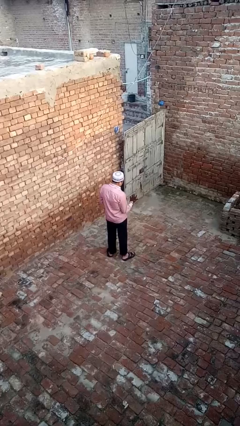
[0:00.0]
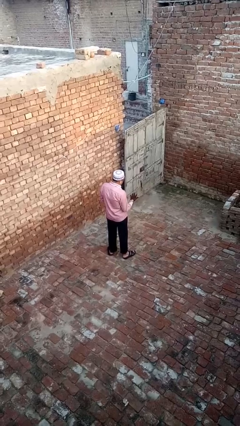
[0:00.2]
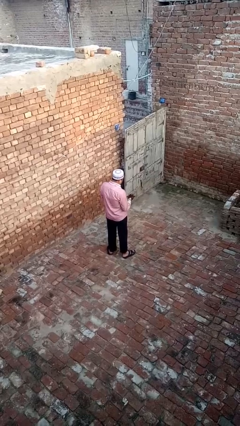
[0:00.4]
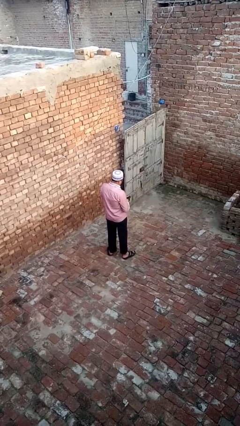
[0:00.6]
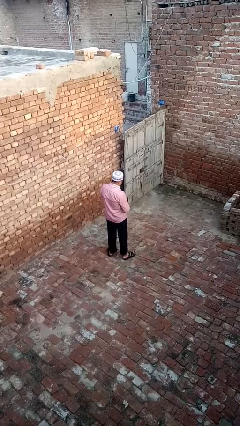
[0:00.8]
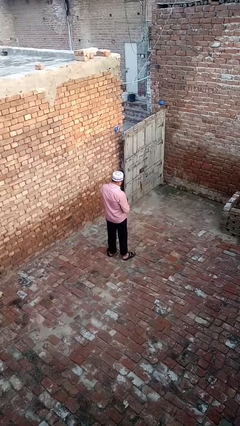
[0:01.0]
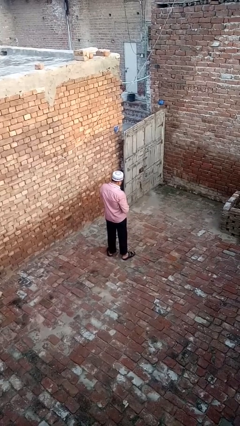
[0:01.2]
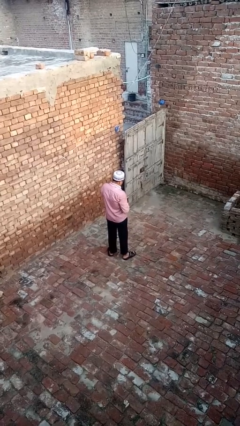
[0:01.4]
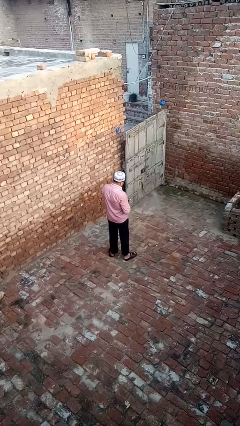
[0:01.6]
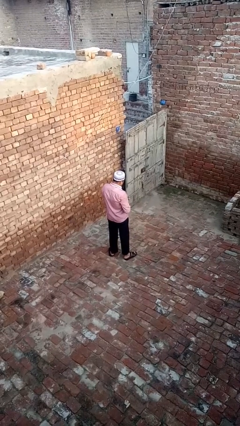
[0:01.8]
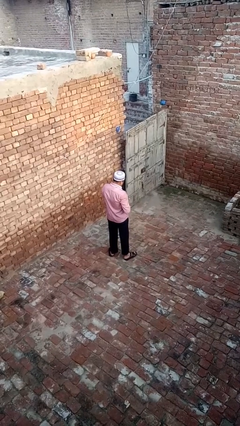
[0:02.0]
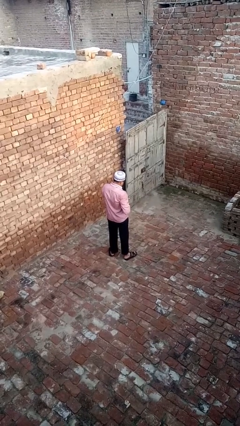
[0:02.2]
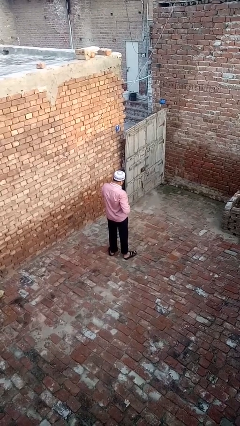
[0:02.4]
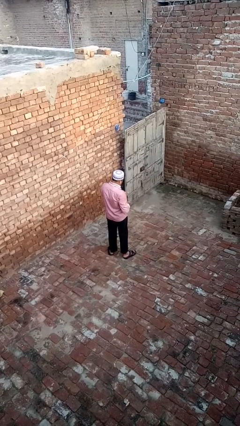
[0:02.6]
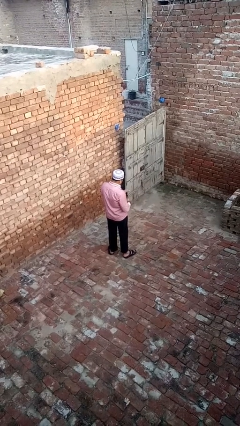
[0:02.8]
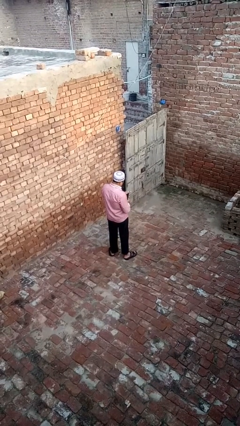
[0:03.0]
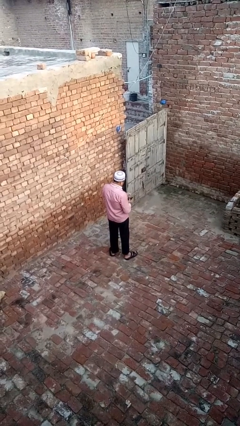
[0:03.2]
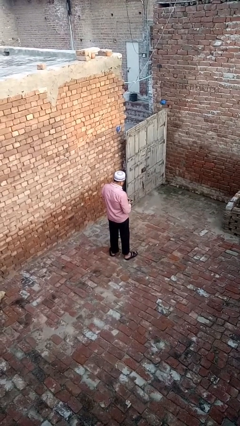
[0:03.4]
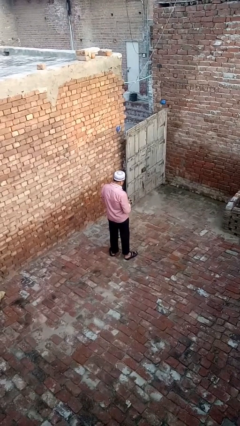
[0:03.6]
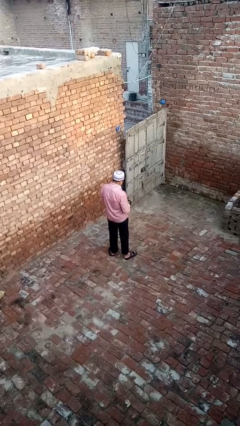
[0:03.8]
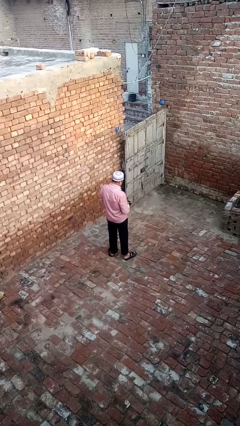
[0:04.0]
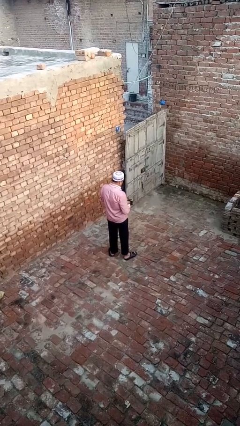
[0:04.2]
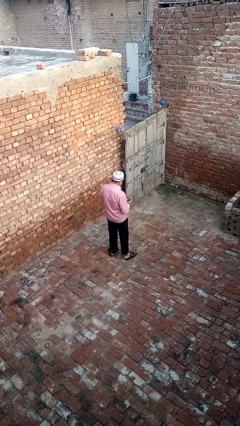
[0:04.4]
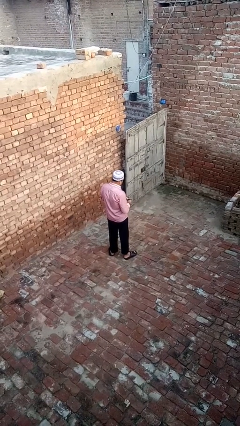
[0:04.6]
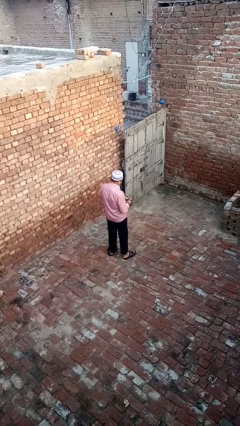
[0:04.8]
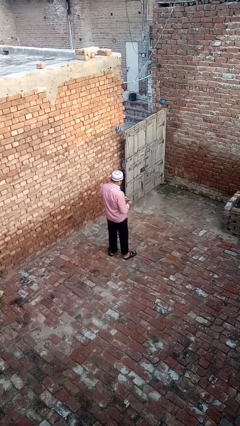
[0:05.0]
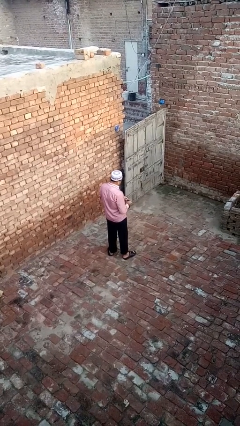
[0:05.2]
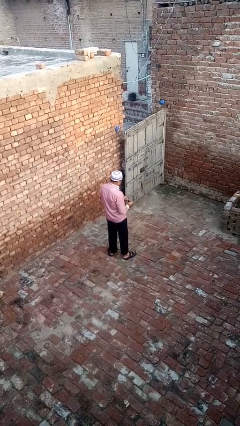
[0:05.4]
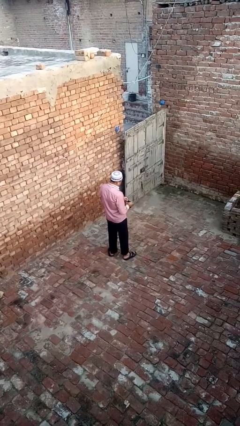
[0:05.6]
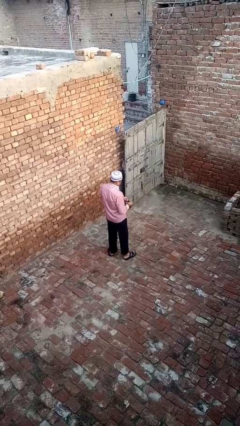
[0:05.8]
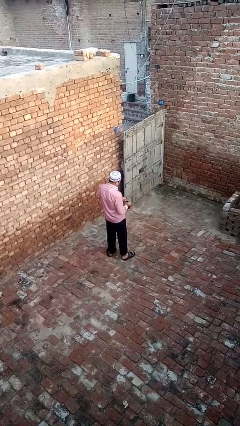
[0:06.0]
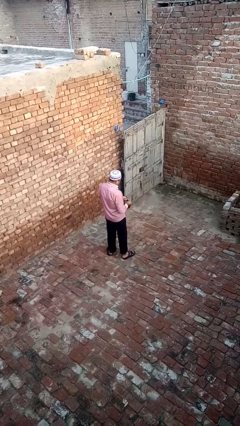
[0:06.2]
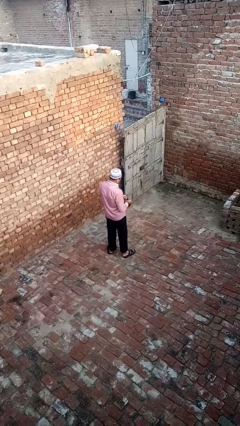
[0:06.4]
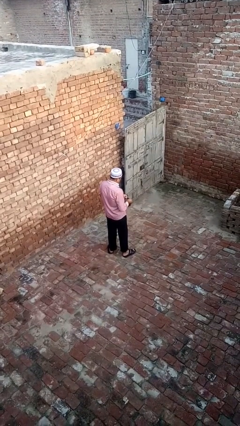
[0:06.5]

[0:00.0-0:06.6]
person takes off gloves

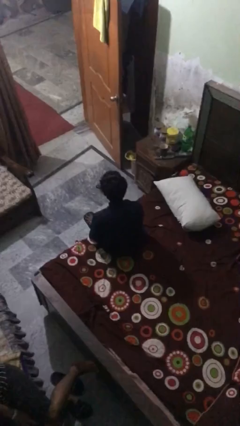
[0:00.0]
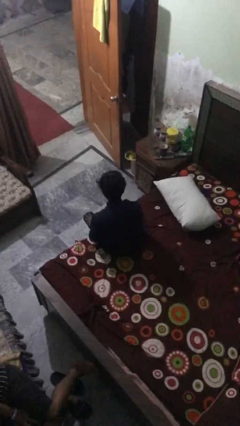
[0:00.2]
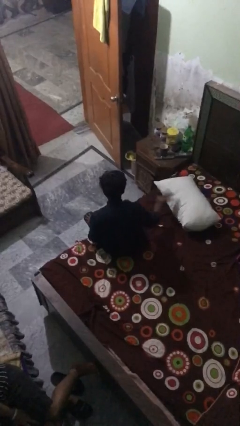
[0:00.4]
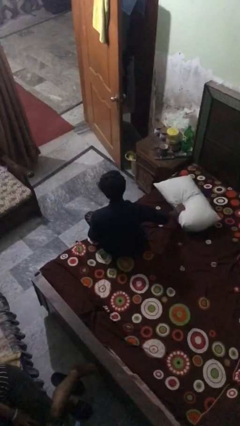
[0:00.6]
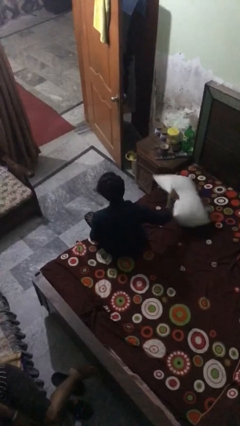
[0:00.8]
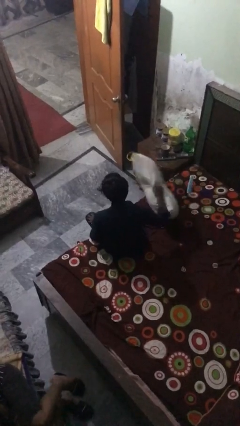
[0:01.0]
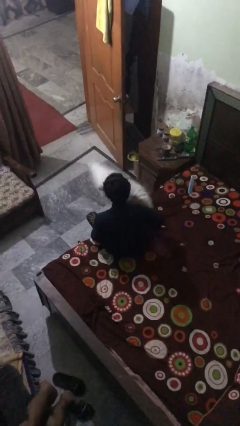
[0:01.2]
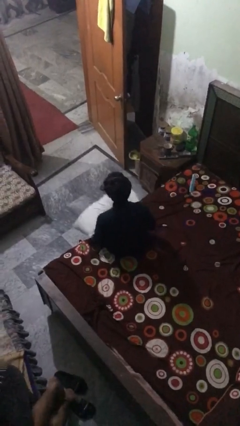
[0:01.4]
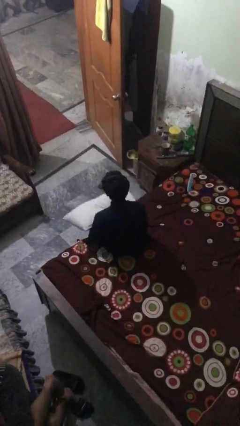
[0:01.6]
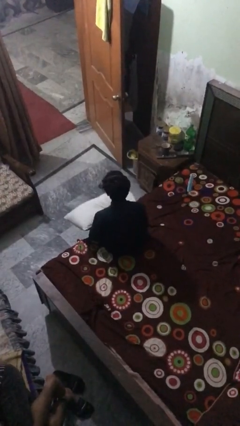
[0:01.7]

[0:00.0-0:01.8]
person picks up object from bed

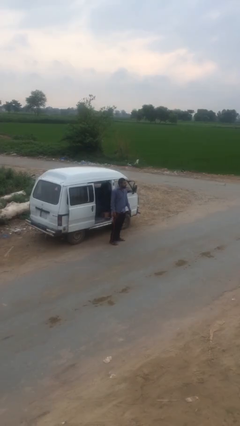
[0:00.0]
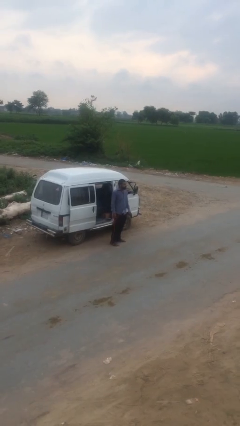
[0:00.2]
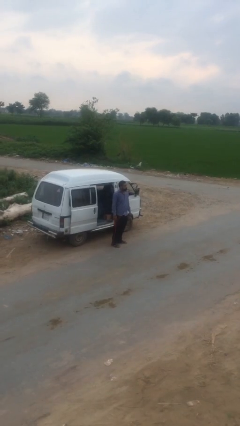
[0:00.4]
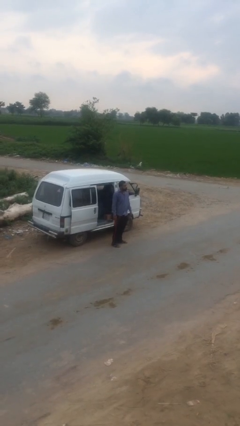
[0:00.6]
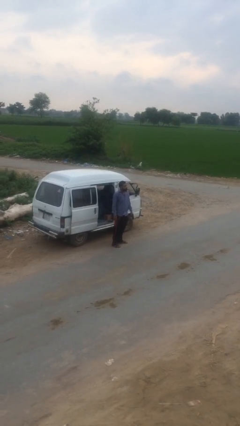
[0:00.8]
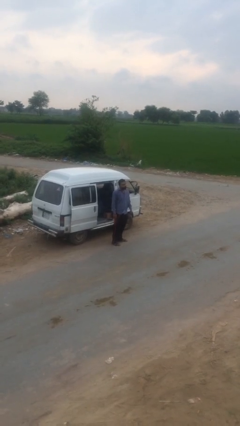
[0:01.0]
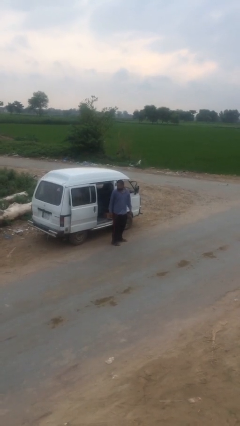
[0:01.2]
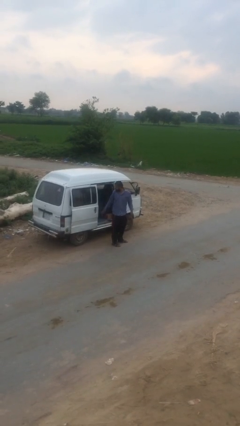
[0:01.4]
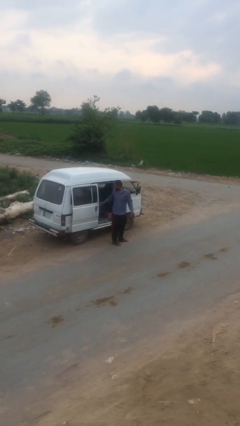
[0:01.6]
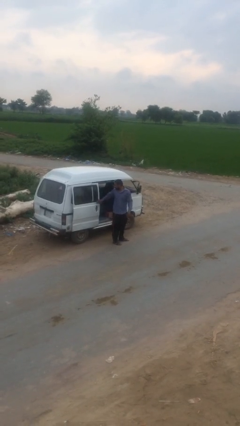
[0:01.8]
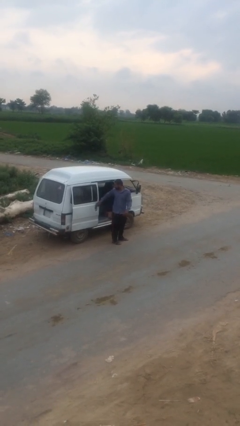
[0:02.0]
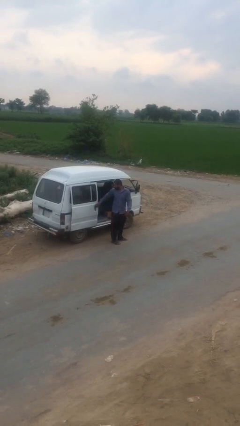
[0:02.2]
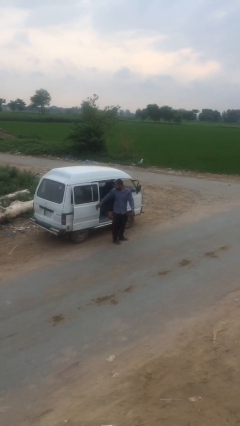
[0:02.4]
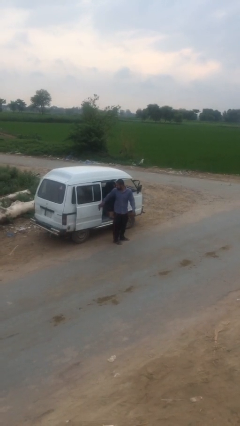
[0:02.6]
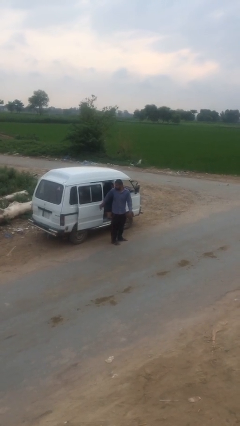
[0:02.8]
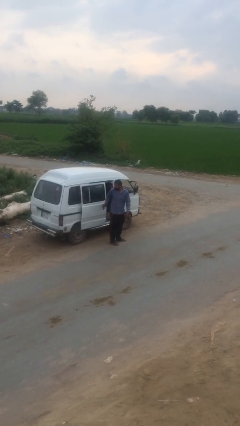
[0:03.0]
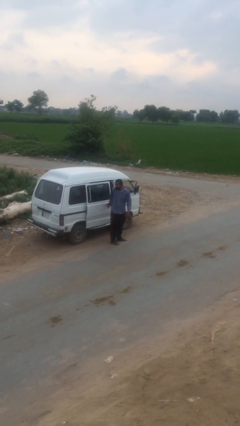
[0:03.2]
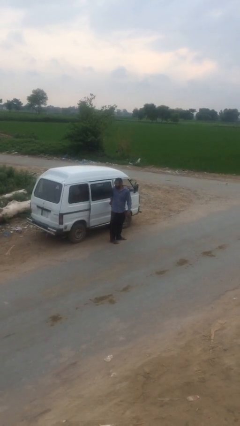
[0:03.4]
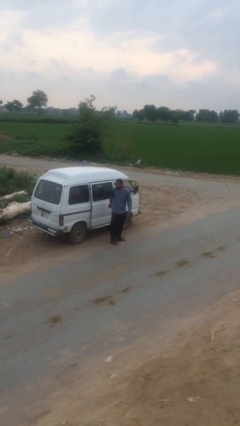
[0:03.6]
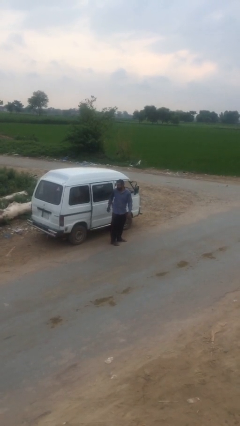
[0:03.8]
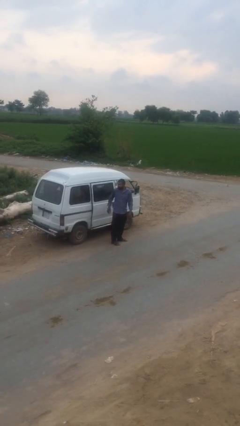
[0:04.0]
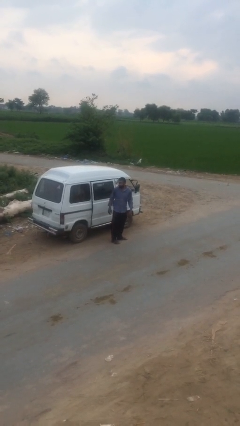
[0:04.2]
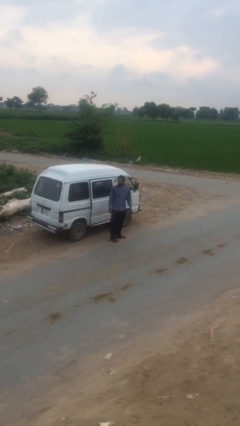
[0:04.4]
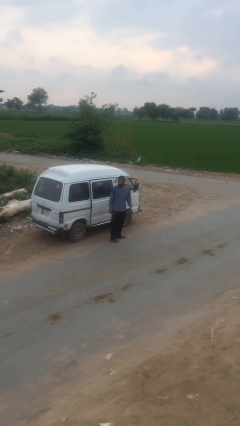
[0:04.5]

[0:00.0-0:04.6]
person closes car door

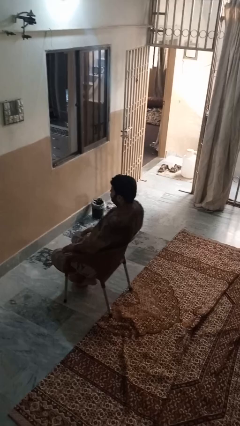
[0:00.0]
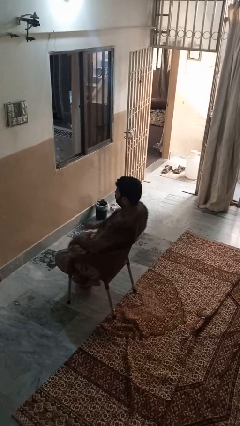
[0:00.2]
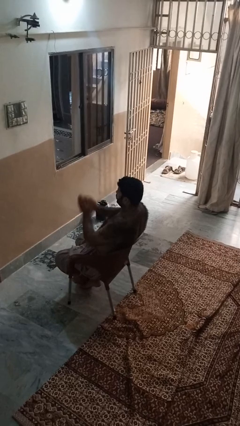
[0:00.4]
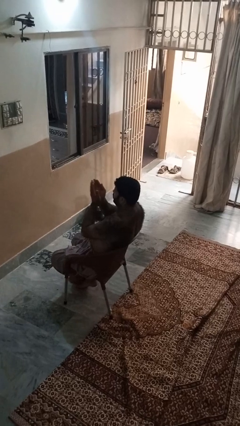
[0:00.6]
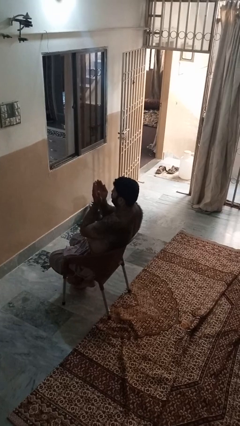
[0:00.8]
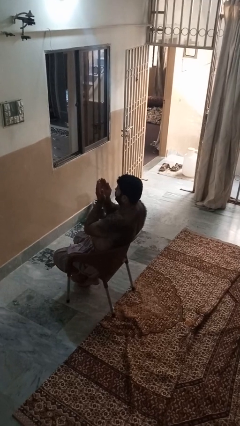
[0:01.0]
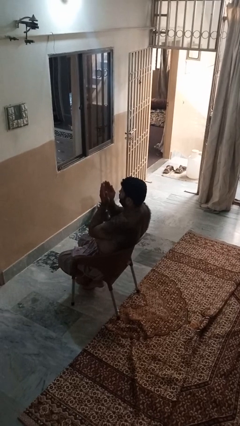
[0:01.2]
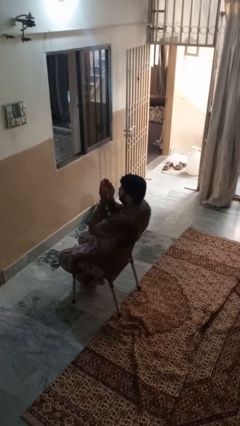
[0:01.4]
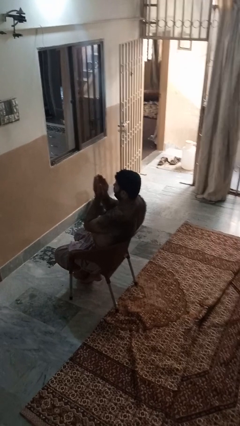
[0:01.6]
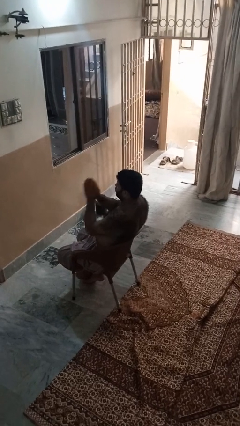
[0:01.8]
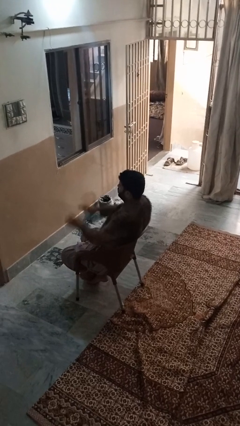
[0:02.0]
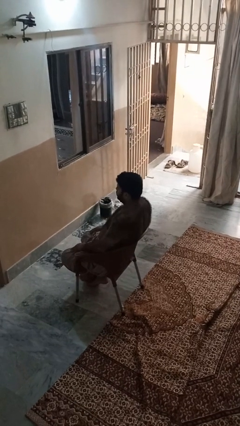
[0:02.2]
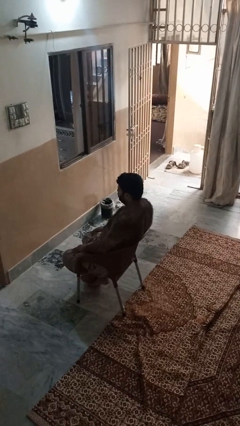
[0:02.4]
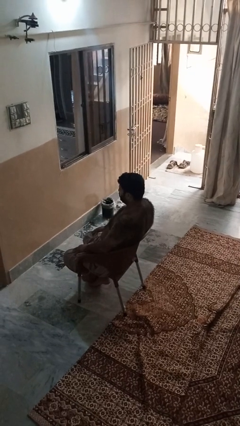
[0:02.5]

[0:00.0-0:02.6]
person prays

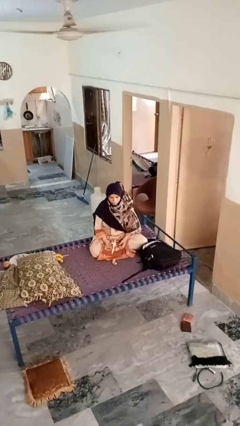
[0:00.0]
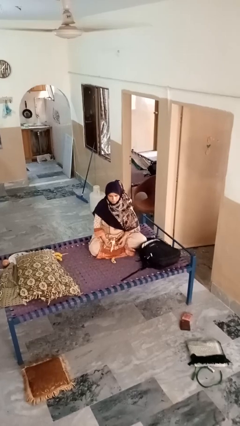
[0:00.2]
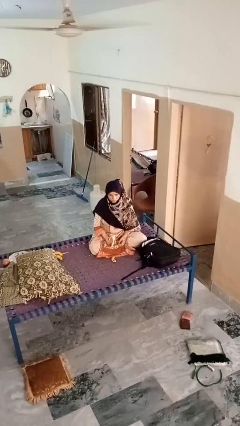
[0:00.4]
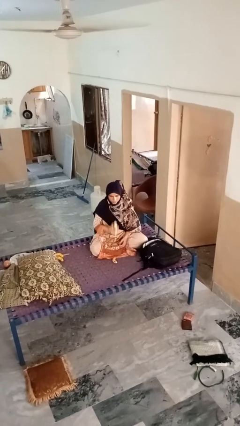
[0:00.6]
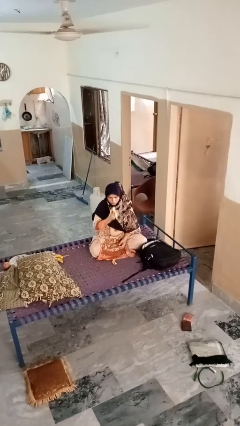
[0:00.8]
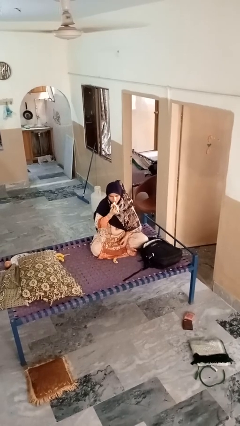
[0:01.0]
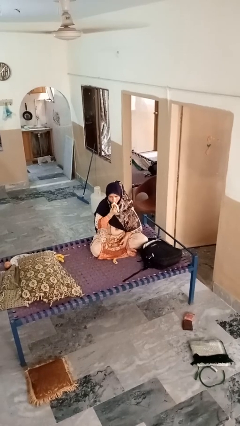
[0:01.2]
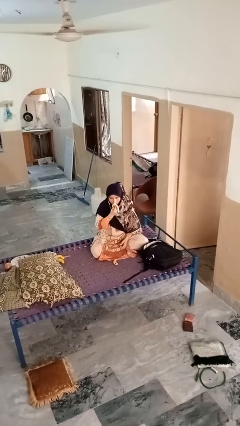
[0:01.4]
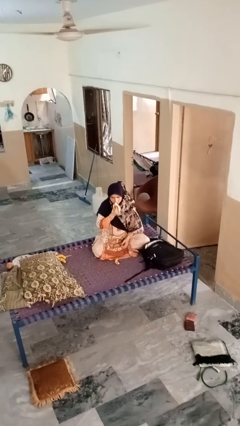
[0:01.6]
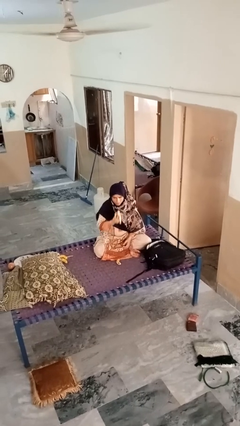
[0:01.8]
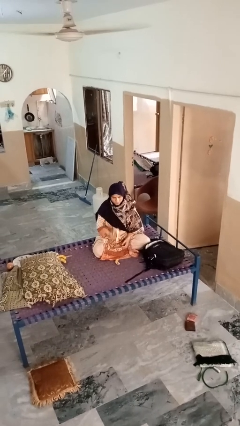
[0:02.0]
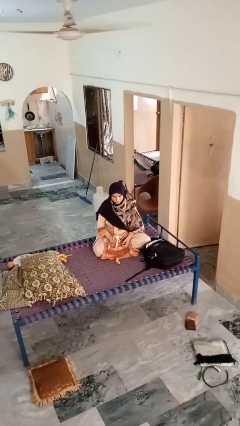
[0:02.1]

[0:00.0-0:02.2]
person eats banana
